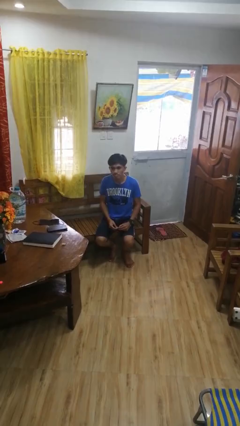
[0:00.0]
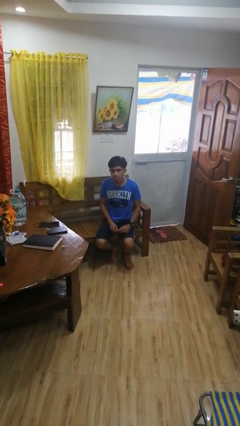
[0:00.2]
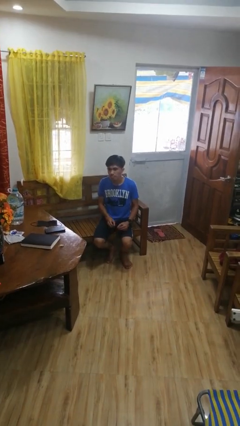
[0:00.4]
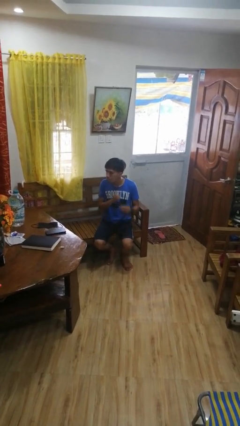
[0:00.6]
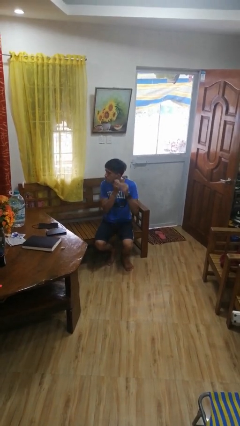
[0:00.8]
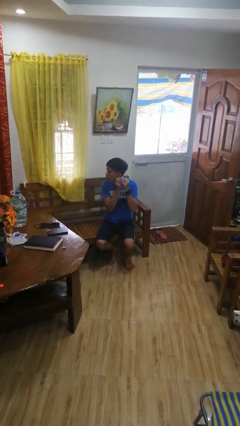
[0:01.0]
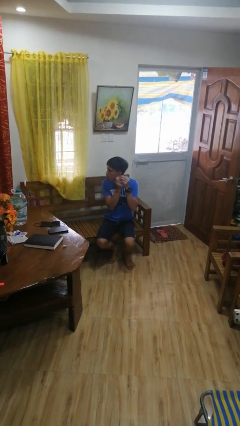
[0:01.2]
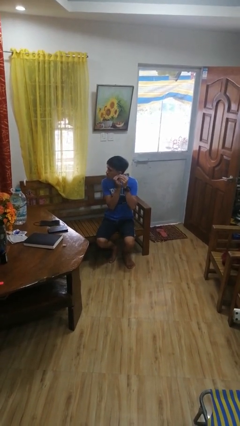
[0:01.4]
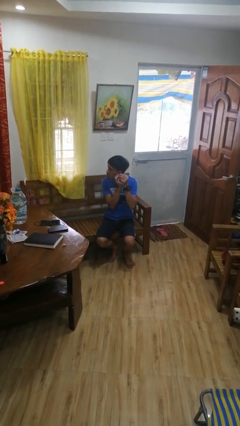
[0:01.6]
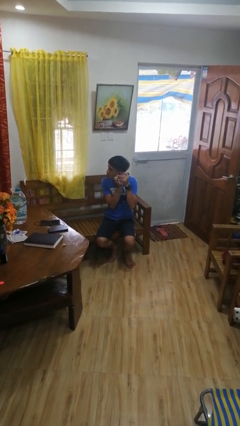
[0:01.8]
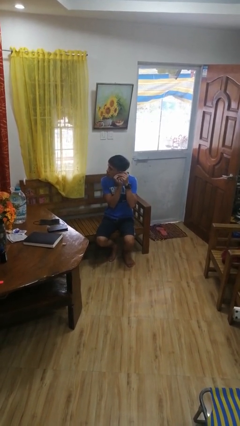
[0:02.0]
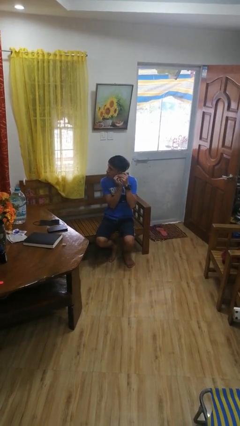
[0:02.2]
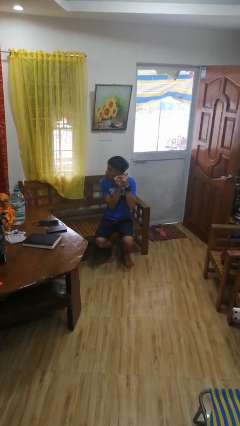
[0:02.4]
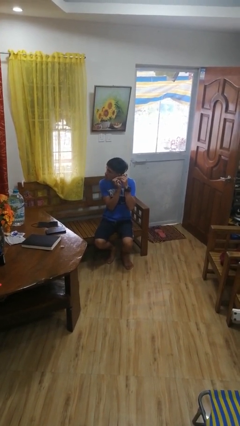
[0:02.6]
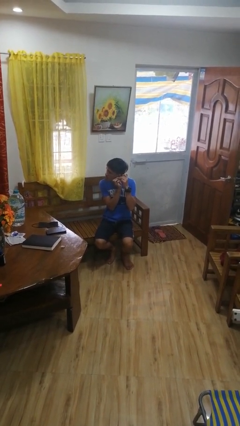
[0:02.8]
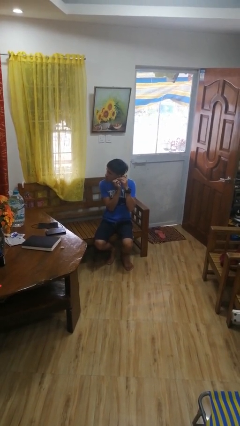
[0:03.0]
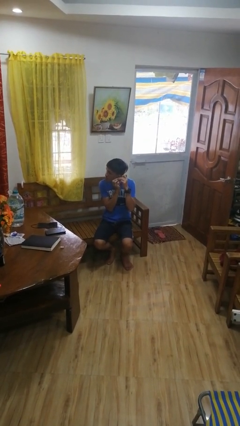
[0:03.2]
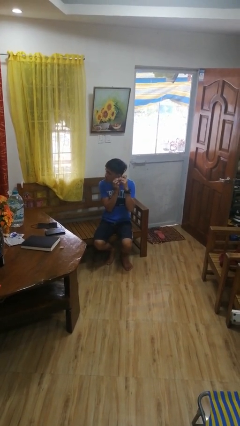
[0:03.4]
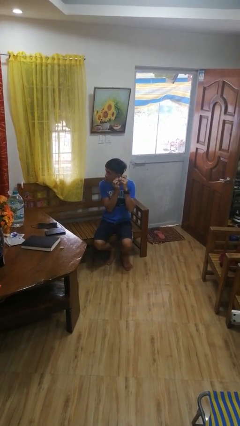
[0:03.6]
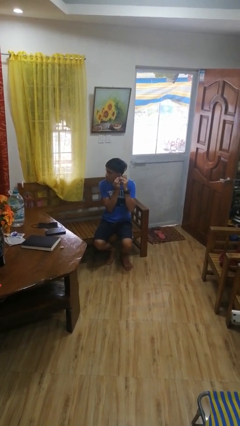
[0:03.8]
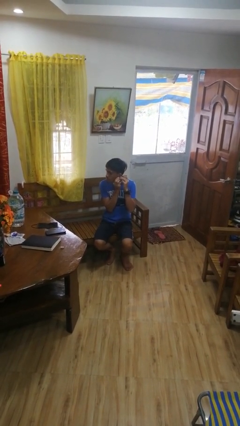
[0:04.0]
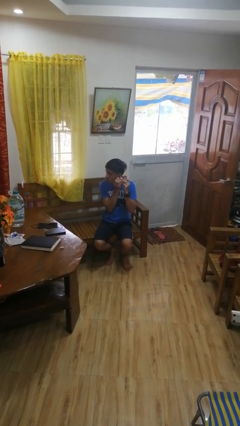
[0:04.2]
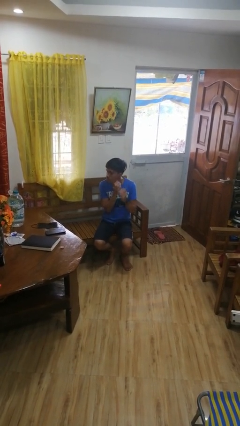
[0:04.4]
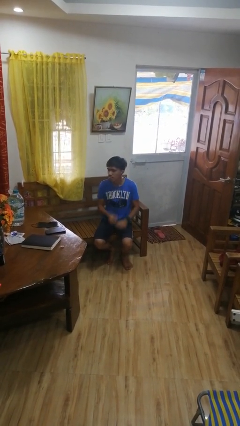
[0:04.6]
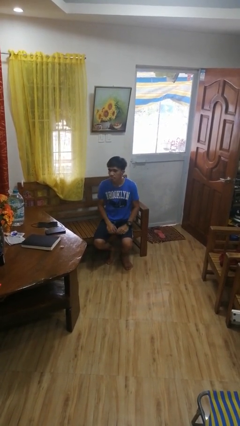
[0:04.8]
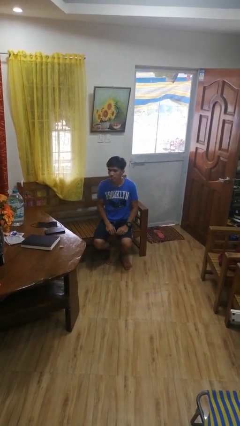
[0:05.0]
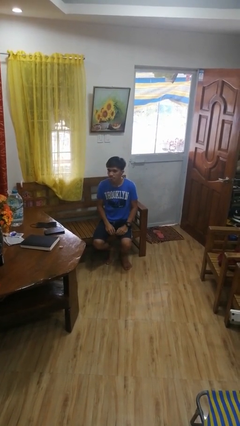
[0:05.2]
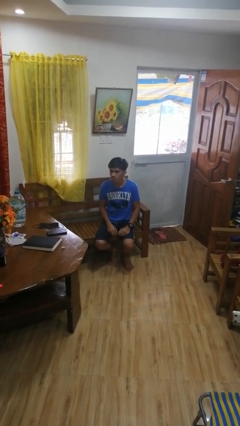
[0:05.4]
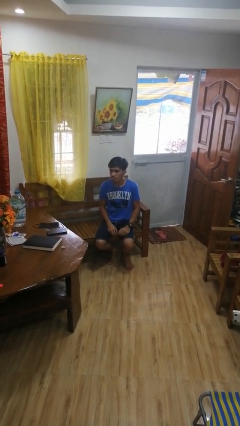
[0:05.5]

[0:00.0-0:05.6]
person puts on earrings

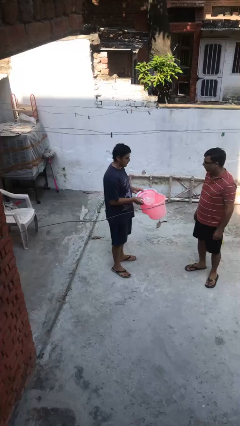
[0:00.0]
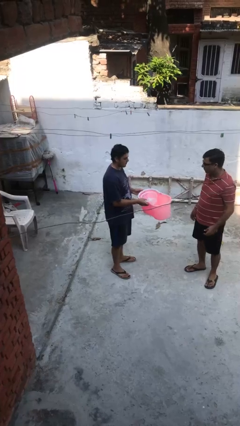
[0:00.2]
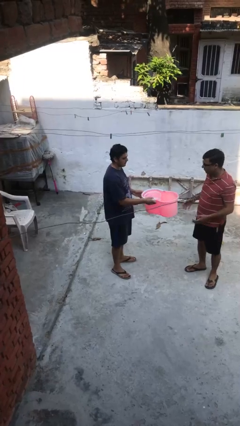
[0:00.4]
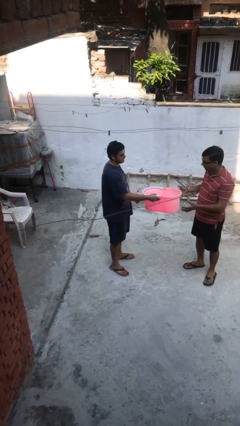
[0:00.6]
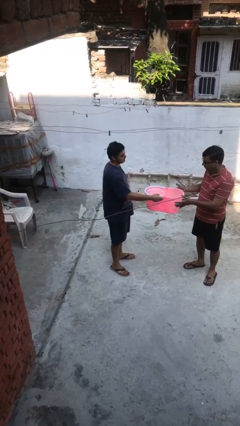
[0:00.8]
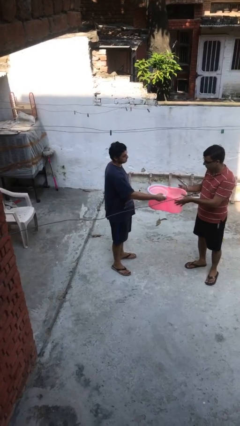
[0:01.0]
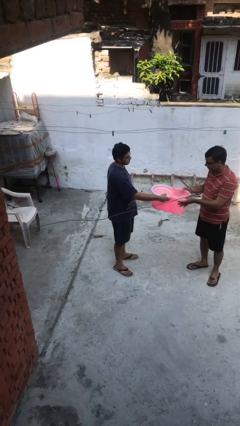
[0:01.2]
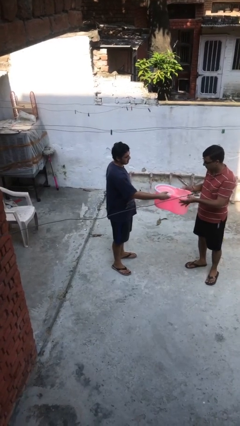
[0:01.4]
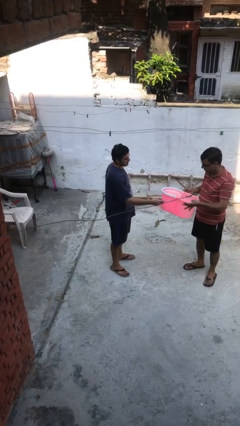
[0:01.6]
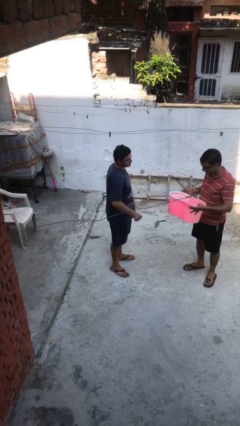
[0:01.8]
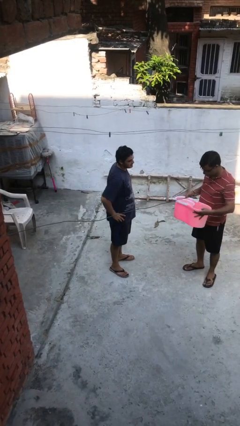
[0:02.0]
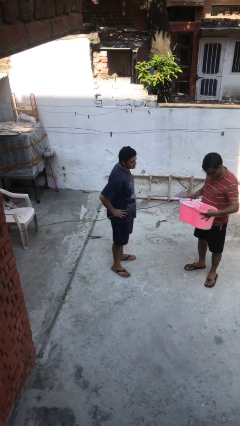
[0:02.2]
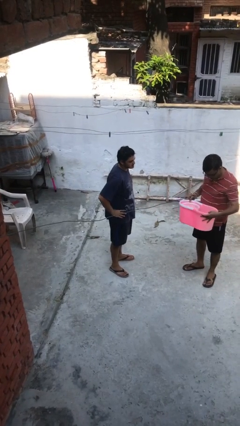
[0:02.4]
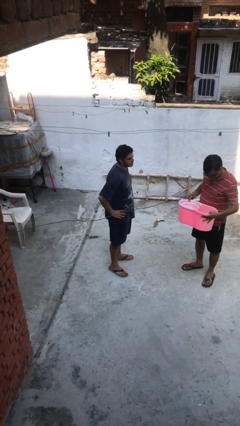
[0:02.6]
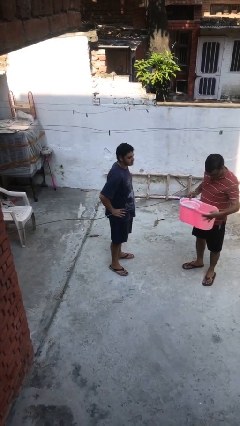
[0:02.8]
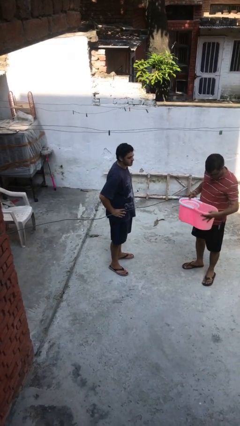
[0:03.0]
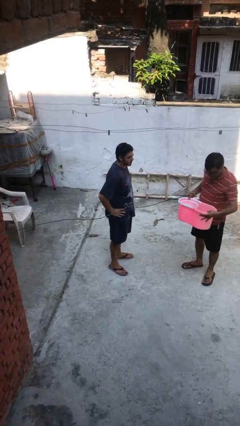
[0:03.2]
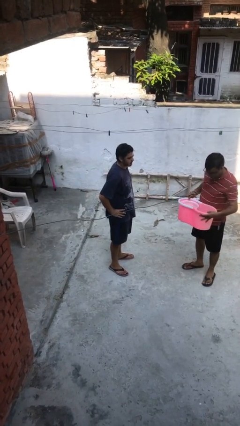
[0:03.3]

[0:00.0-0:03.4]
person transfers object to person

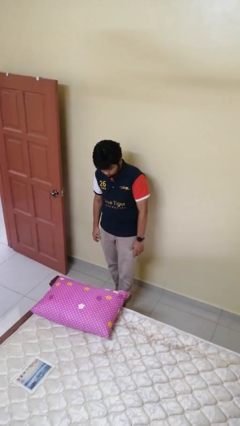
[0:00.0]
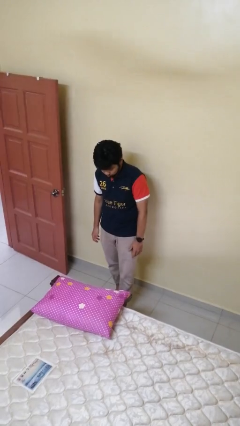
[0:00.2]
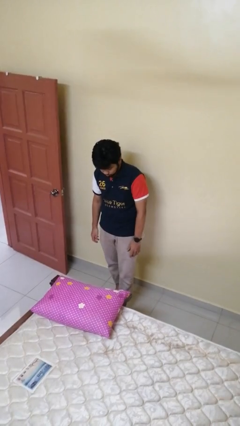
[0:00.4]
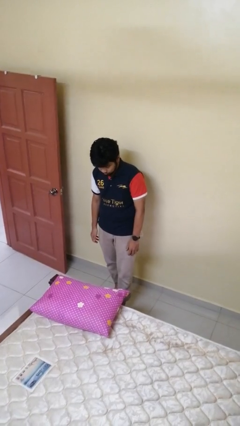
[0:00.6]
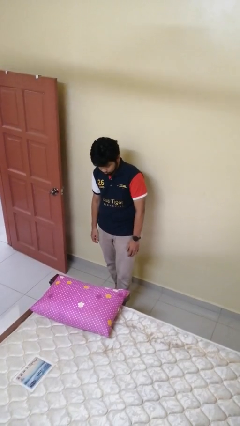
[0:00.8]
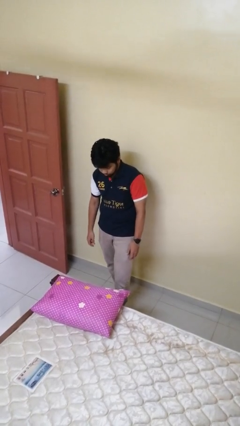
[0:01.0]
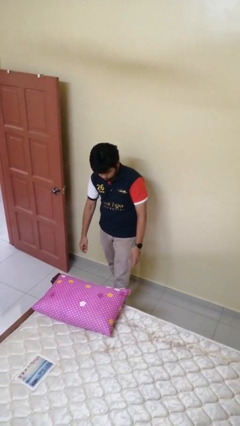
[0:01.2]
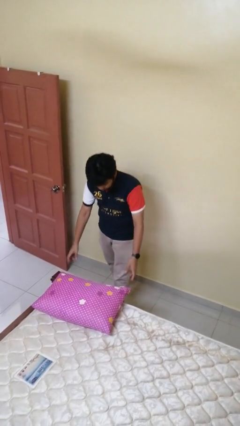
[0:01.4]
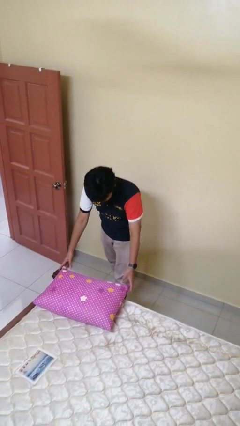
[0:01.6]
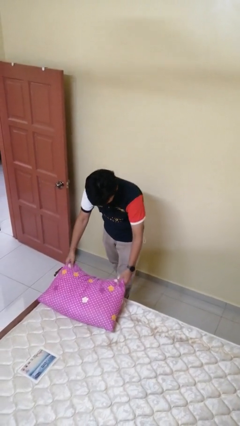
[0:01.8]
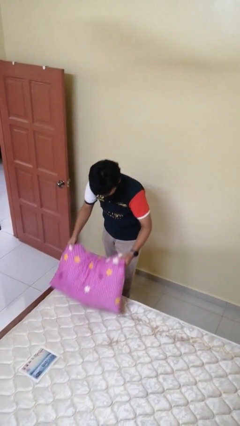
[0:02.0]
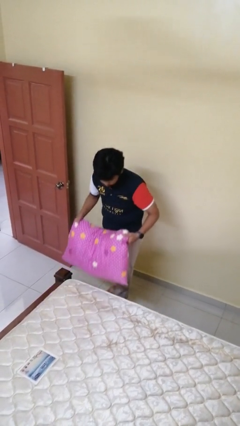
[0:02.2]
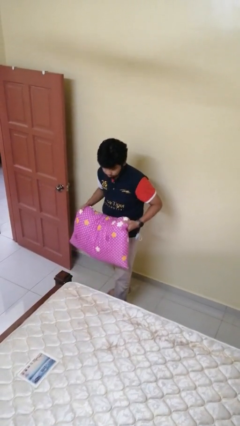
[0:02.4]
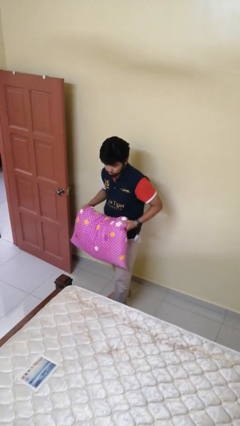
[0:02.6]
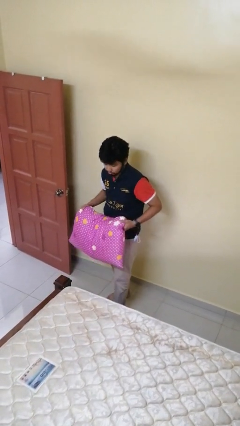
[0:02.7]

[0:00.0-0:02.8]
person picks up object from bed

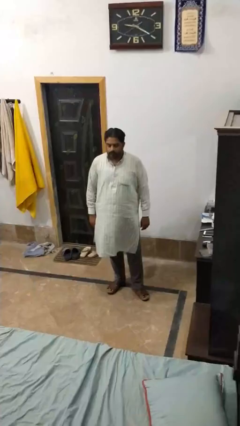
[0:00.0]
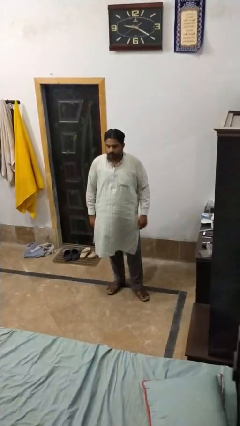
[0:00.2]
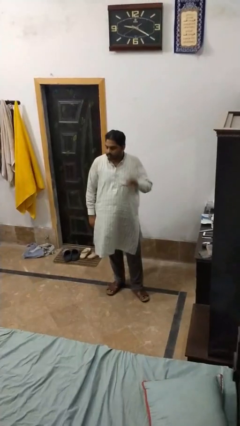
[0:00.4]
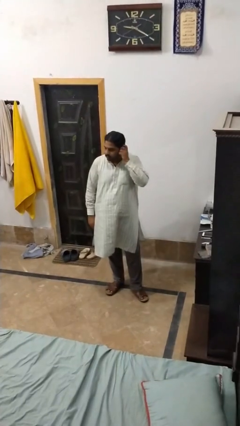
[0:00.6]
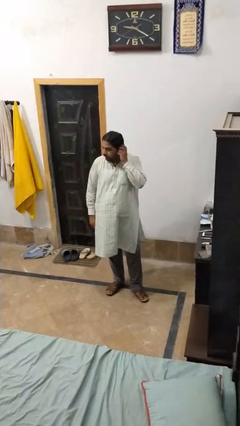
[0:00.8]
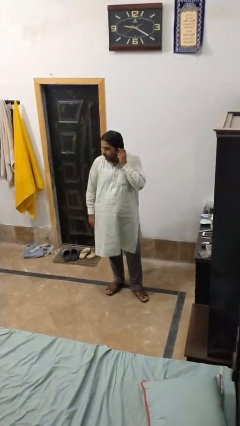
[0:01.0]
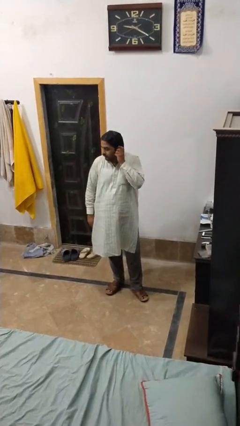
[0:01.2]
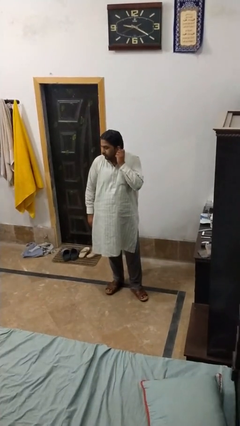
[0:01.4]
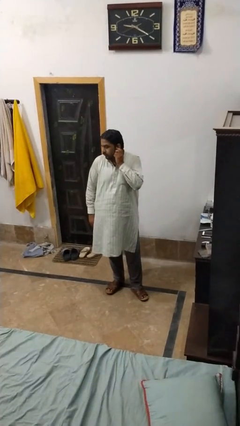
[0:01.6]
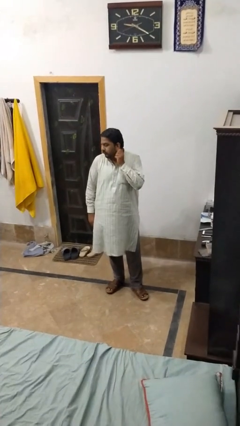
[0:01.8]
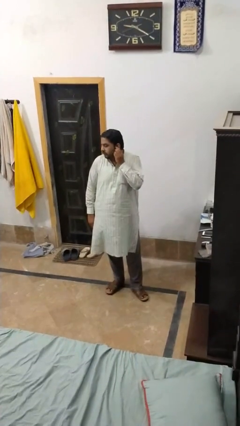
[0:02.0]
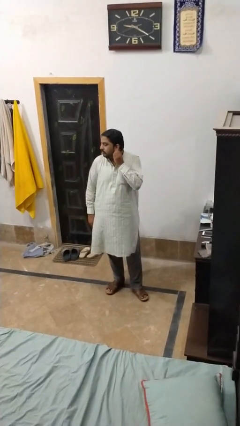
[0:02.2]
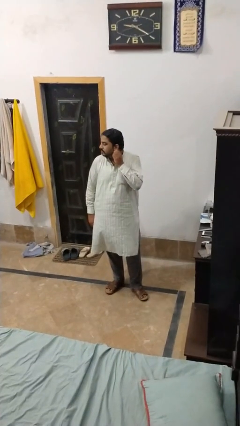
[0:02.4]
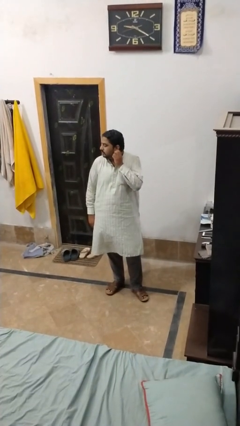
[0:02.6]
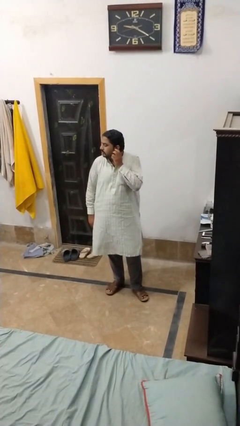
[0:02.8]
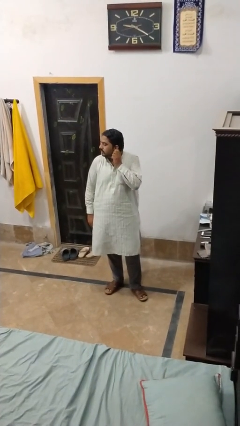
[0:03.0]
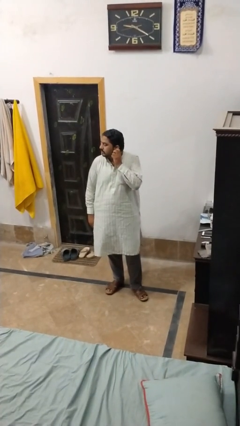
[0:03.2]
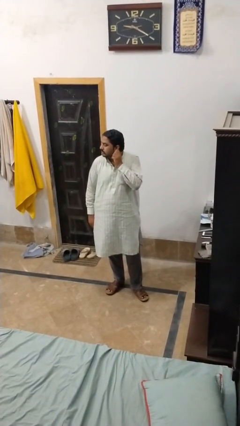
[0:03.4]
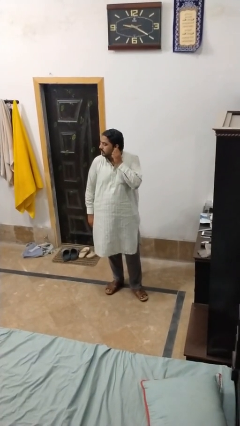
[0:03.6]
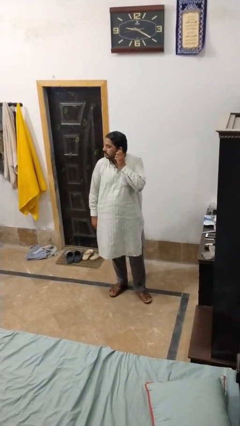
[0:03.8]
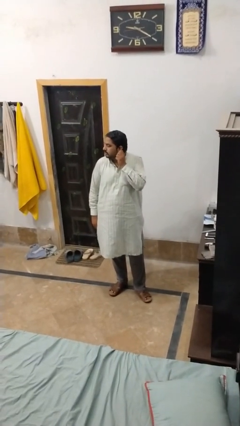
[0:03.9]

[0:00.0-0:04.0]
person touches earlobe

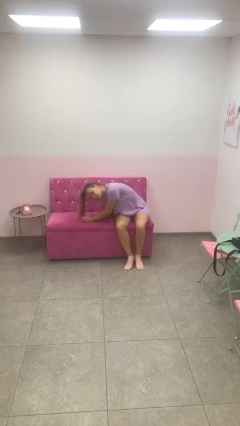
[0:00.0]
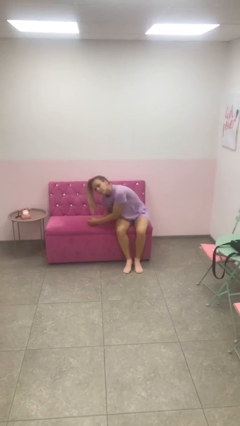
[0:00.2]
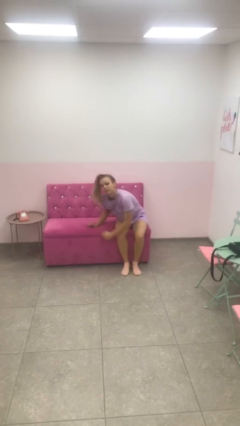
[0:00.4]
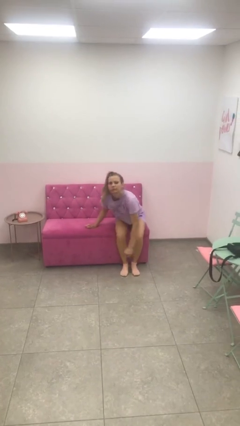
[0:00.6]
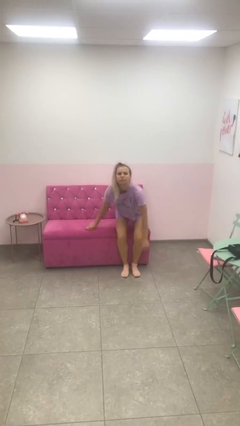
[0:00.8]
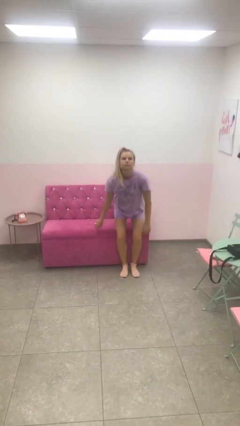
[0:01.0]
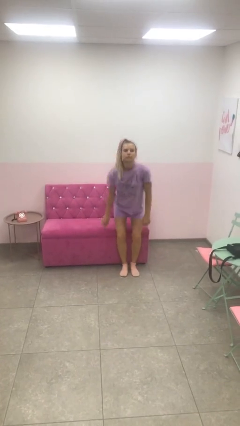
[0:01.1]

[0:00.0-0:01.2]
person stands up

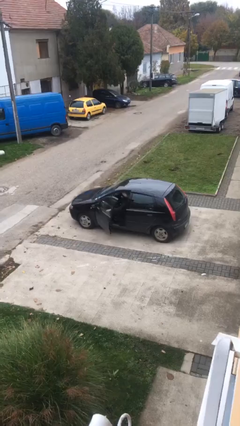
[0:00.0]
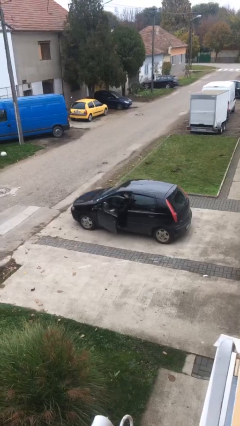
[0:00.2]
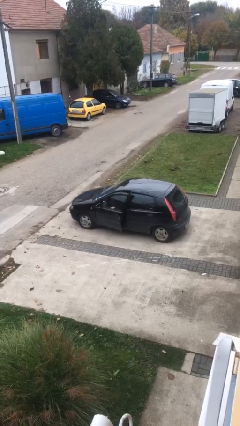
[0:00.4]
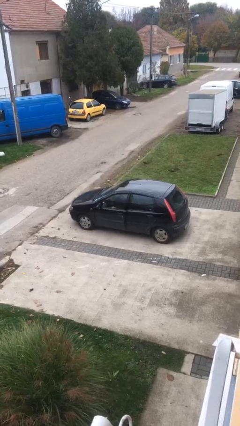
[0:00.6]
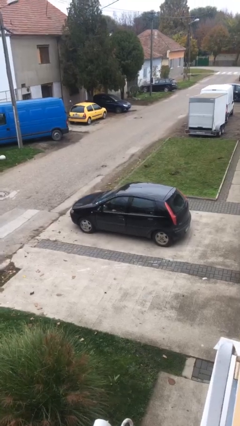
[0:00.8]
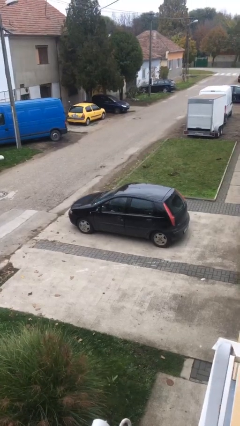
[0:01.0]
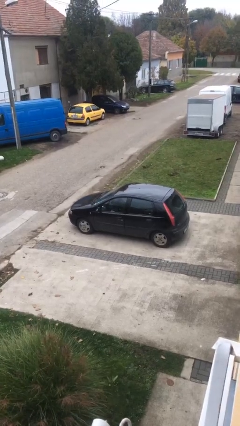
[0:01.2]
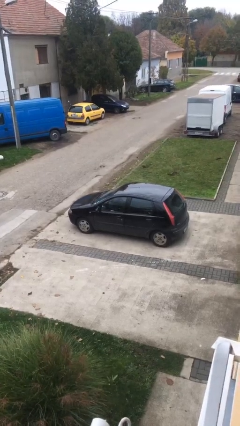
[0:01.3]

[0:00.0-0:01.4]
person closes car door
